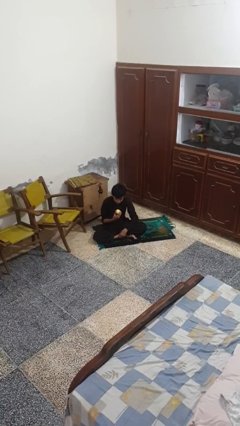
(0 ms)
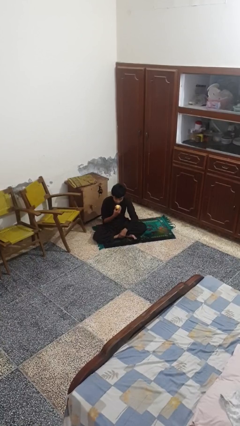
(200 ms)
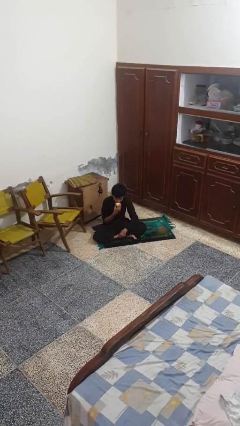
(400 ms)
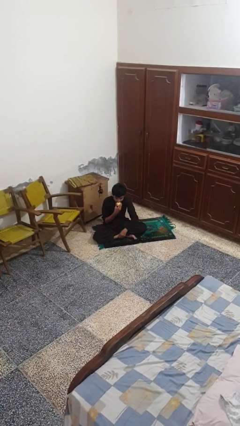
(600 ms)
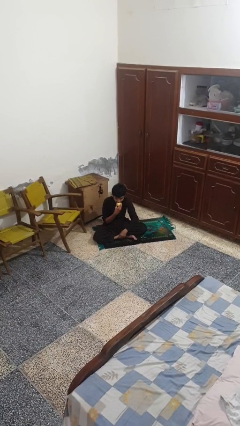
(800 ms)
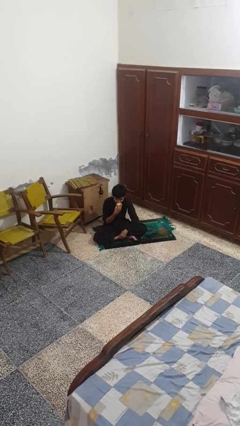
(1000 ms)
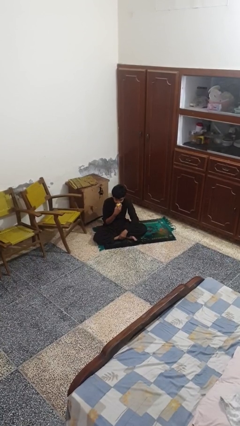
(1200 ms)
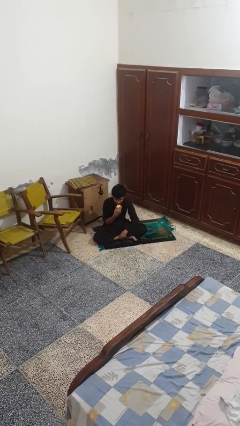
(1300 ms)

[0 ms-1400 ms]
person eats apple

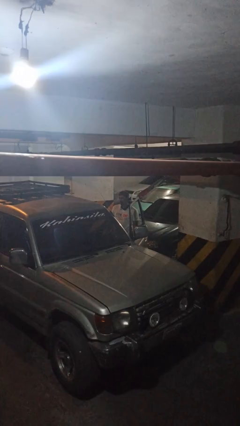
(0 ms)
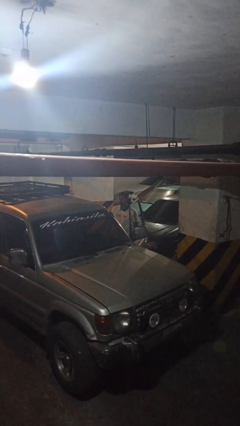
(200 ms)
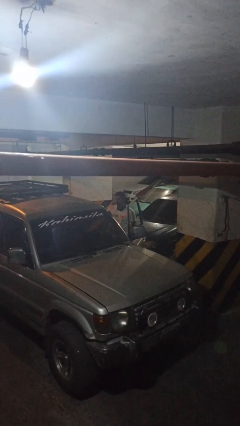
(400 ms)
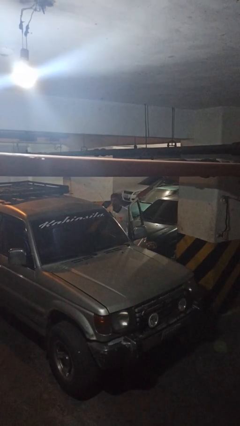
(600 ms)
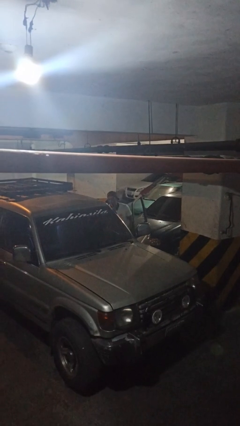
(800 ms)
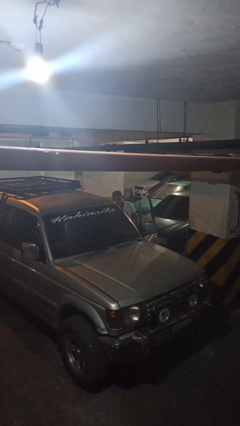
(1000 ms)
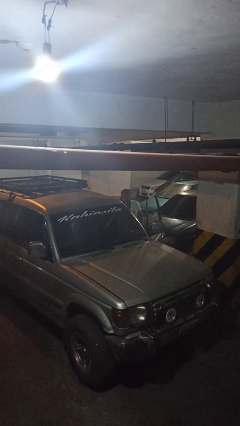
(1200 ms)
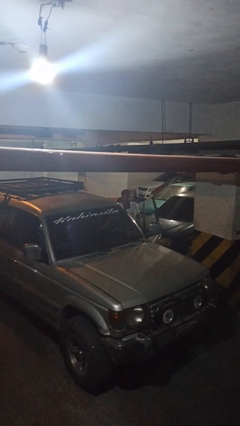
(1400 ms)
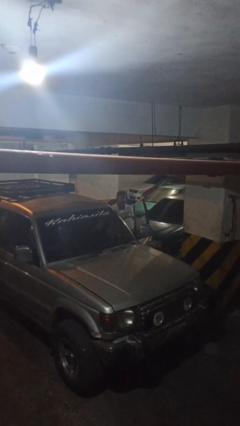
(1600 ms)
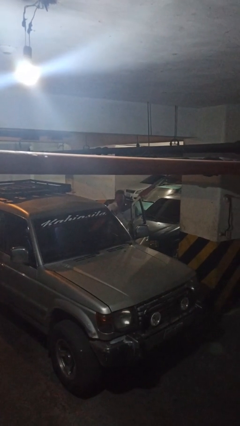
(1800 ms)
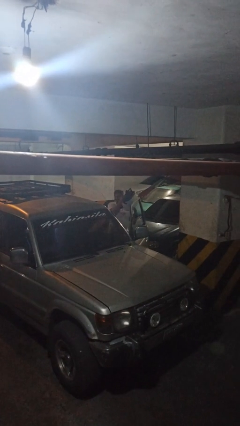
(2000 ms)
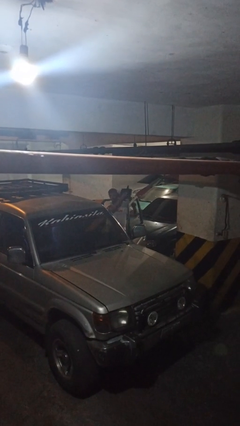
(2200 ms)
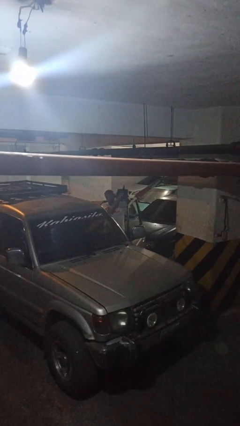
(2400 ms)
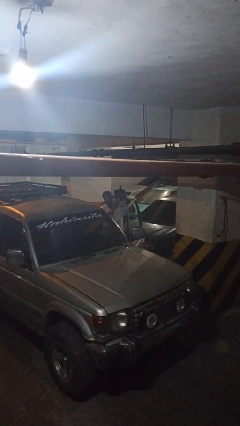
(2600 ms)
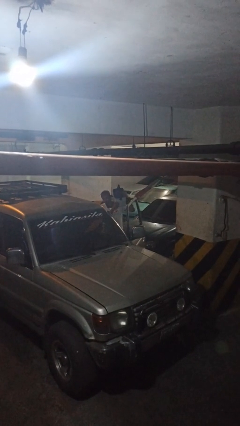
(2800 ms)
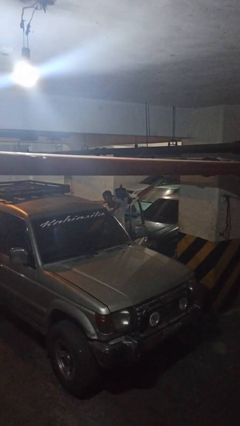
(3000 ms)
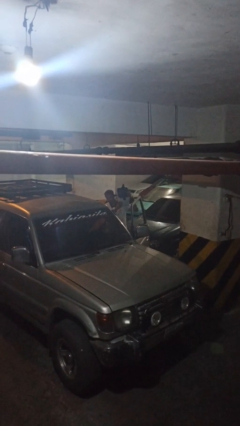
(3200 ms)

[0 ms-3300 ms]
person unloads car

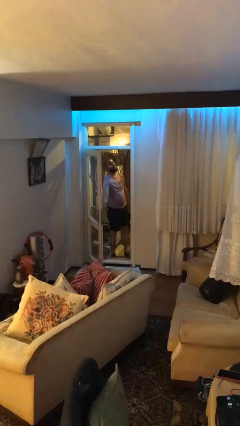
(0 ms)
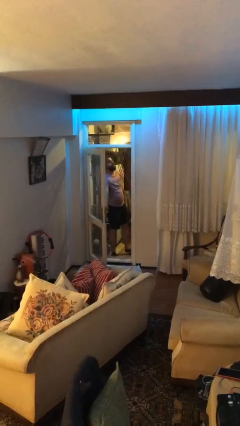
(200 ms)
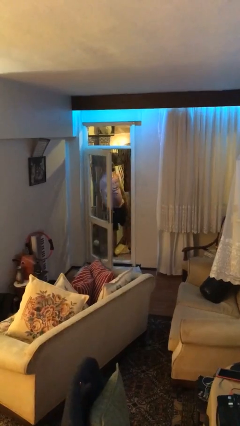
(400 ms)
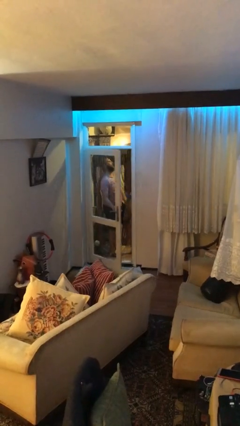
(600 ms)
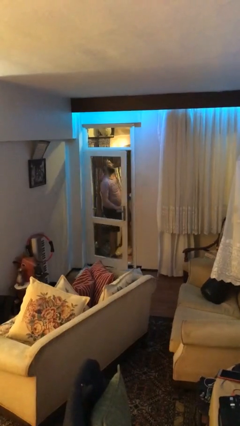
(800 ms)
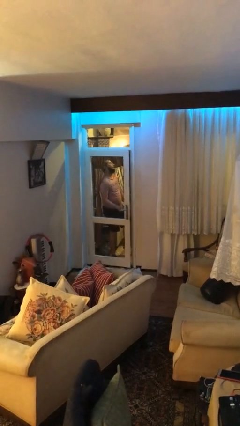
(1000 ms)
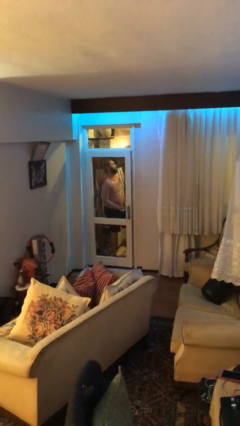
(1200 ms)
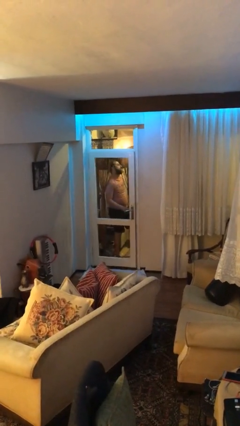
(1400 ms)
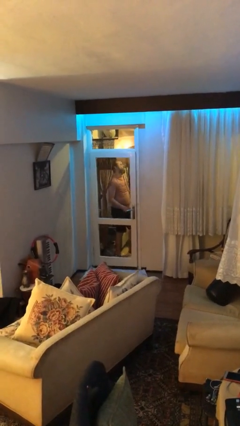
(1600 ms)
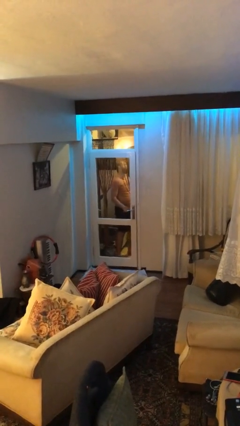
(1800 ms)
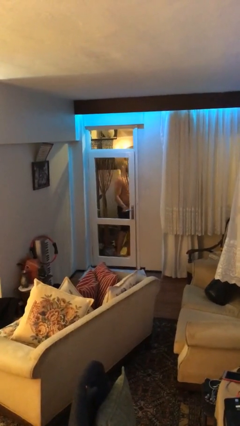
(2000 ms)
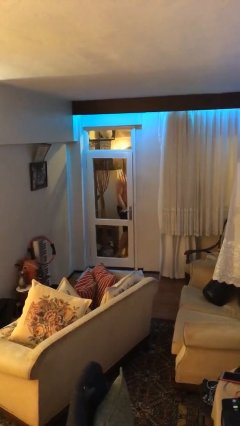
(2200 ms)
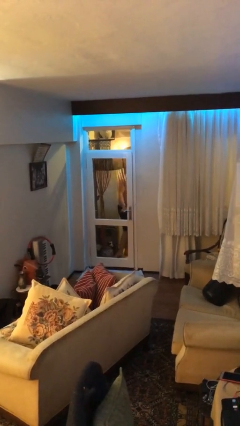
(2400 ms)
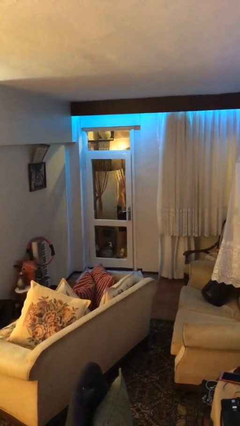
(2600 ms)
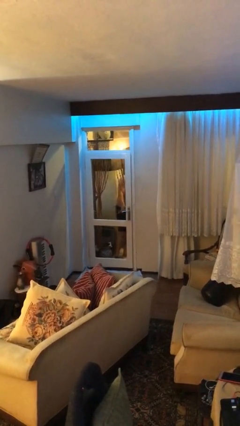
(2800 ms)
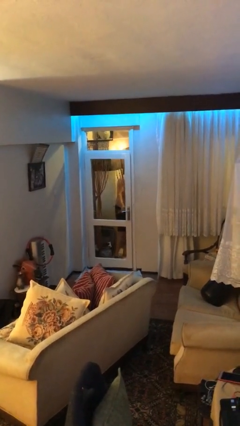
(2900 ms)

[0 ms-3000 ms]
person closes facility door

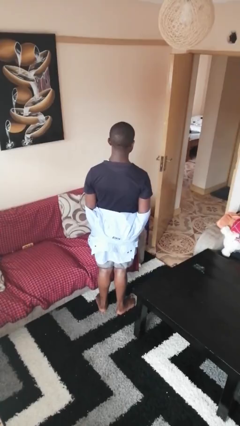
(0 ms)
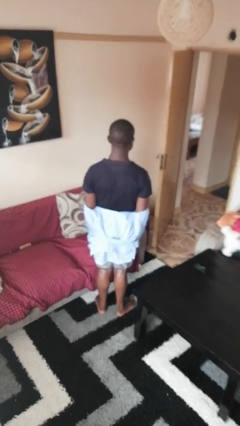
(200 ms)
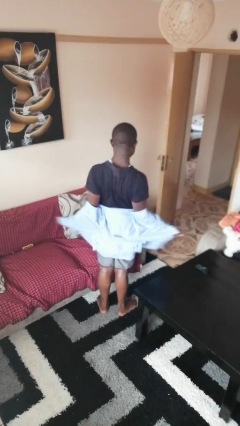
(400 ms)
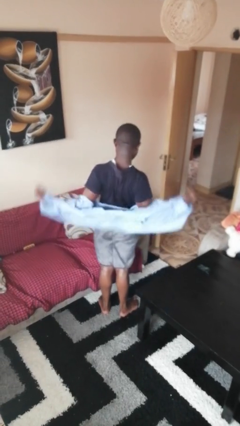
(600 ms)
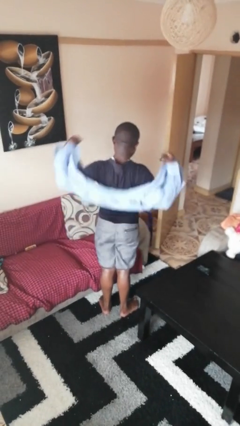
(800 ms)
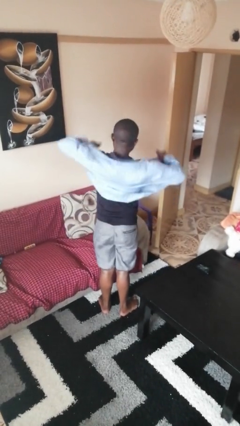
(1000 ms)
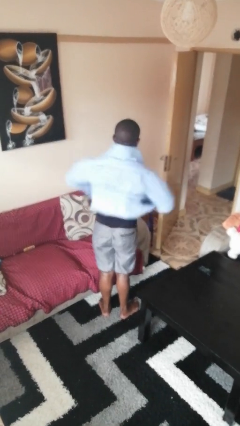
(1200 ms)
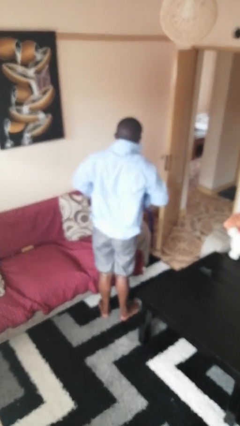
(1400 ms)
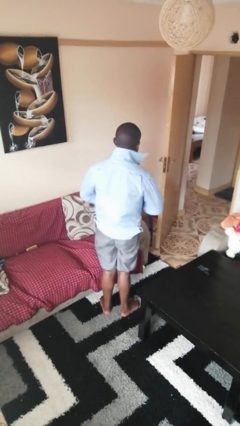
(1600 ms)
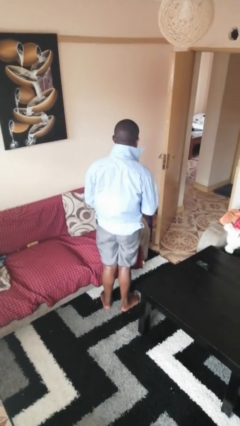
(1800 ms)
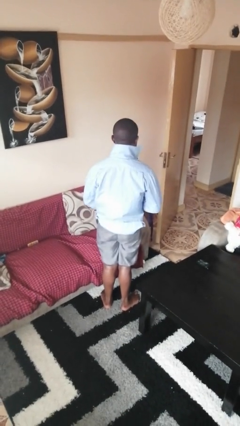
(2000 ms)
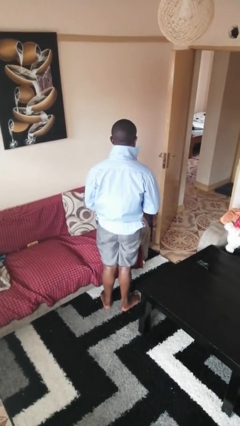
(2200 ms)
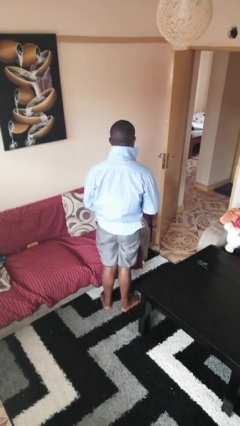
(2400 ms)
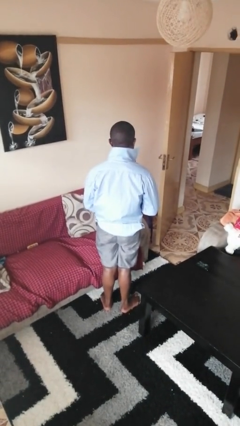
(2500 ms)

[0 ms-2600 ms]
person puts on shirt

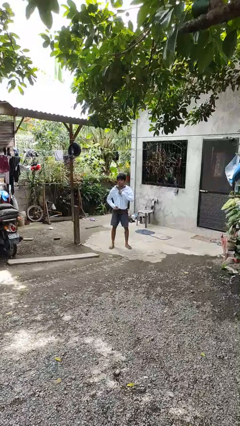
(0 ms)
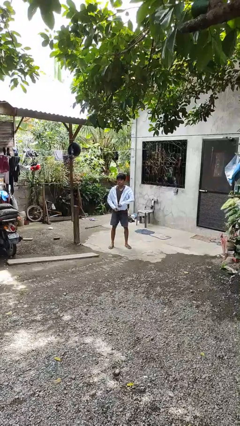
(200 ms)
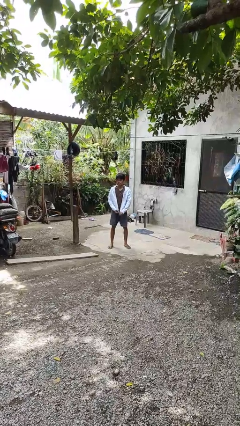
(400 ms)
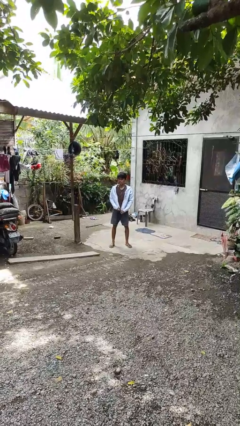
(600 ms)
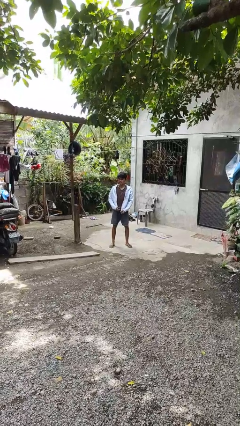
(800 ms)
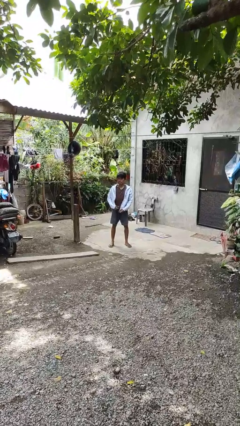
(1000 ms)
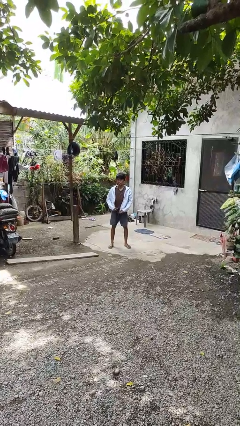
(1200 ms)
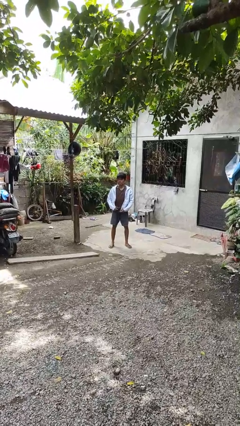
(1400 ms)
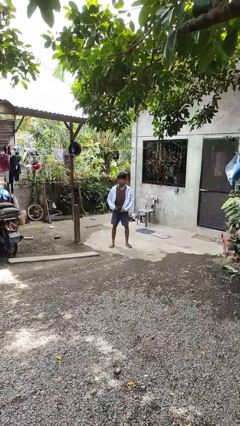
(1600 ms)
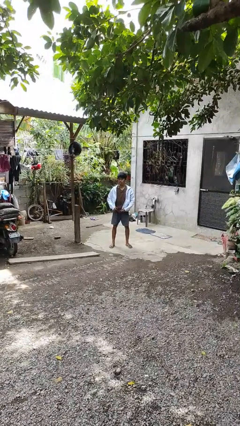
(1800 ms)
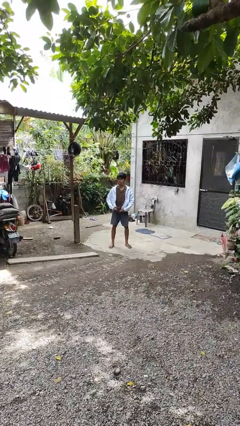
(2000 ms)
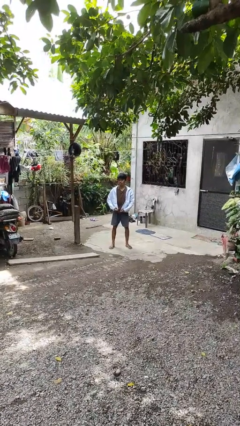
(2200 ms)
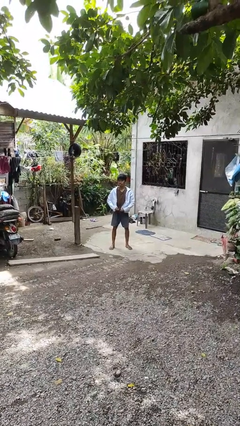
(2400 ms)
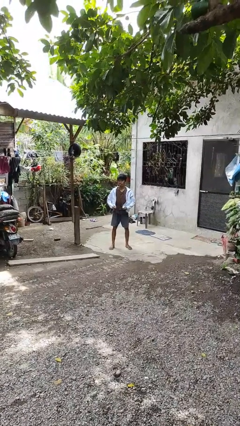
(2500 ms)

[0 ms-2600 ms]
person unzips jacket

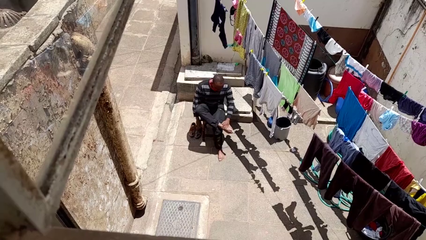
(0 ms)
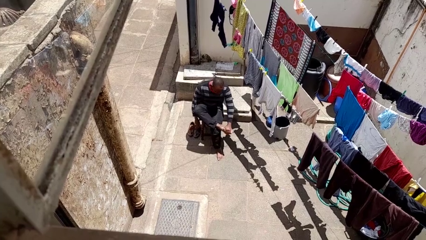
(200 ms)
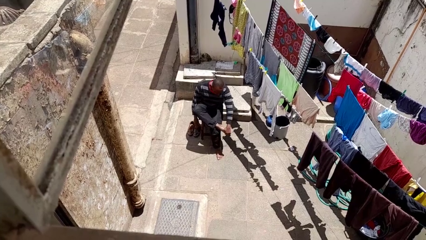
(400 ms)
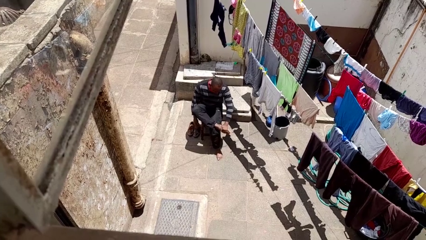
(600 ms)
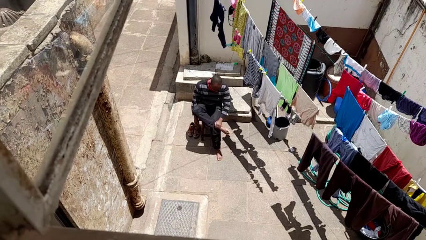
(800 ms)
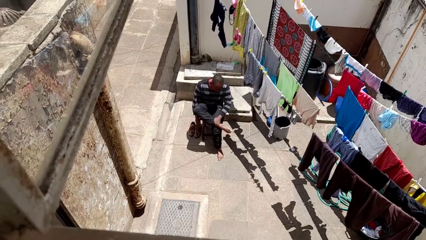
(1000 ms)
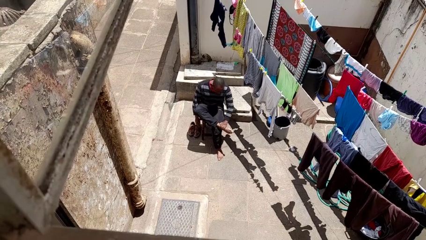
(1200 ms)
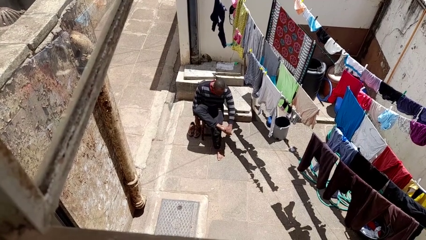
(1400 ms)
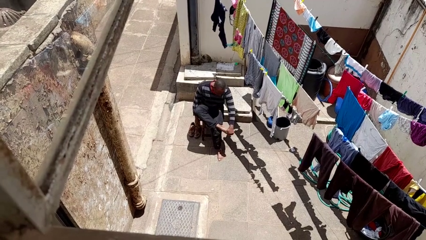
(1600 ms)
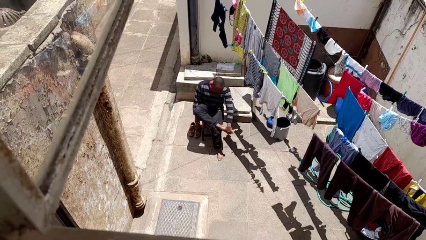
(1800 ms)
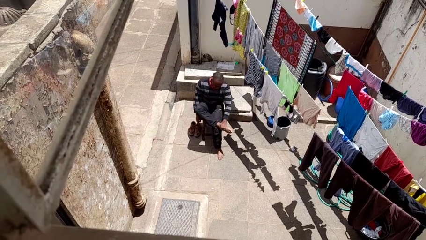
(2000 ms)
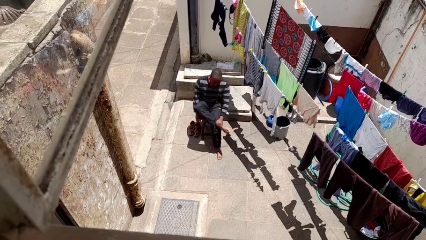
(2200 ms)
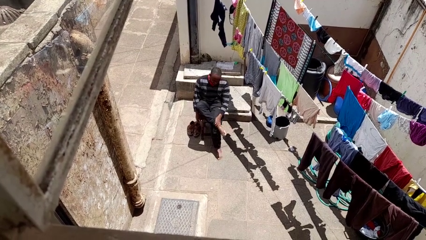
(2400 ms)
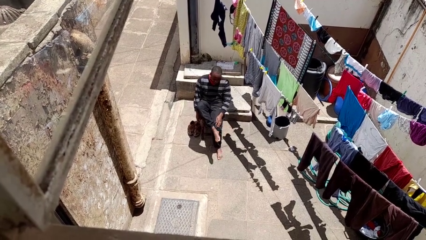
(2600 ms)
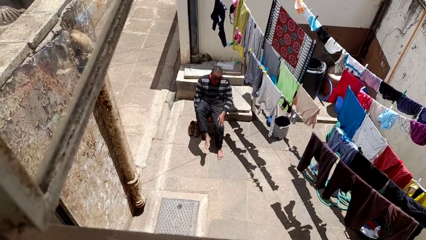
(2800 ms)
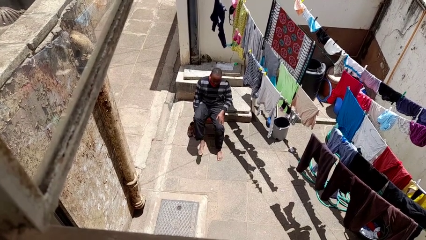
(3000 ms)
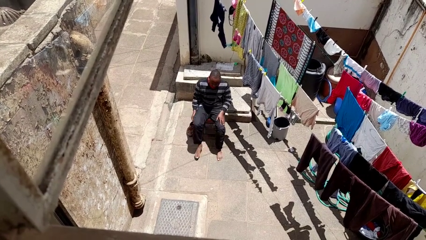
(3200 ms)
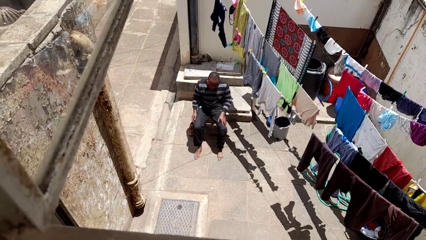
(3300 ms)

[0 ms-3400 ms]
person rubs foot

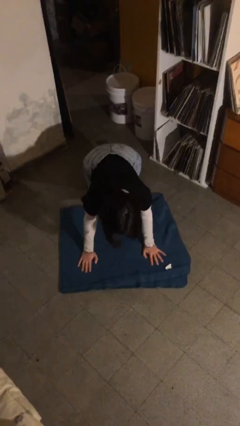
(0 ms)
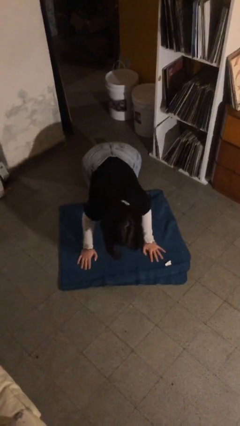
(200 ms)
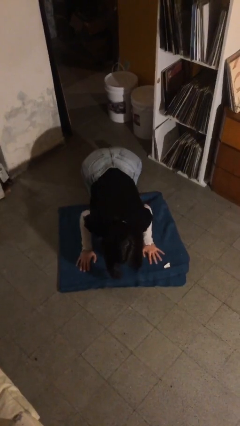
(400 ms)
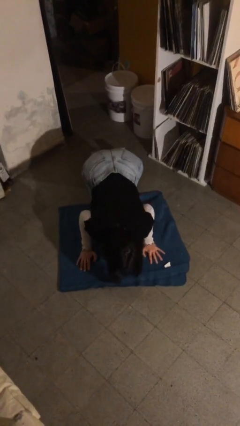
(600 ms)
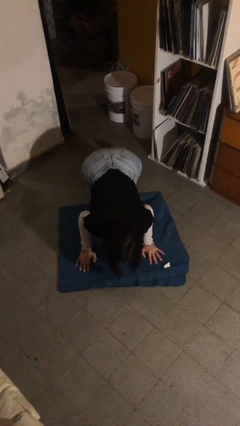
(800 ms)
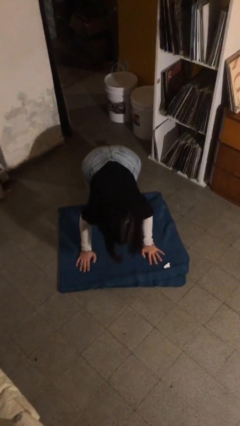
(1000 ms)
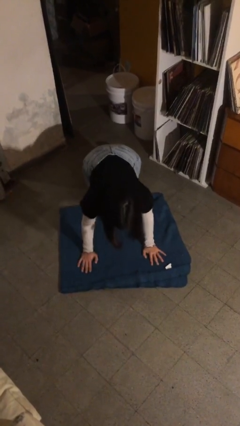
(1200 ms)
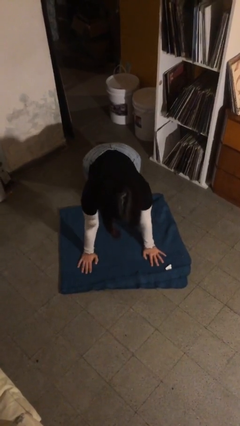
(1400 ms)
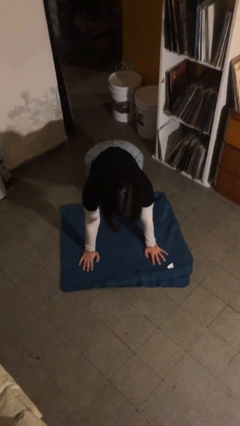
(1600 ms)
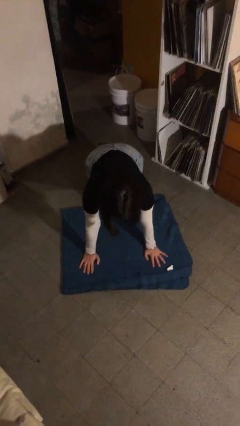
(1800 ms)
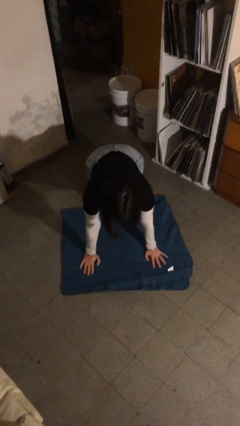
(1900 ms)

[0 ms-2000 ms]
person exercises with pushup
